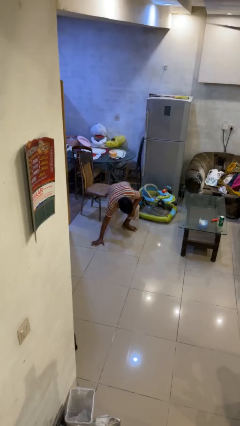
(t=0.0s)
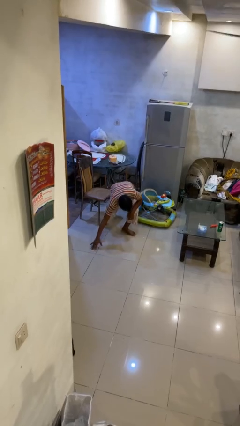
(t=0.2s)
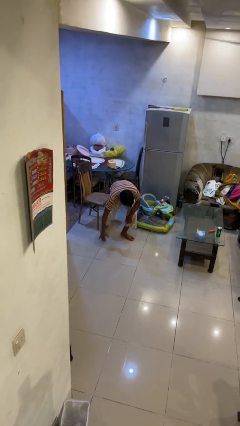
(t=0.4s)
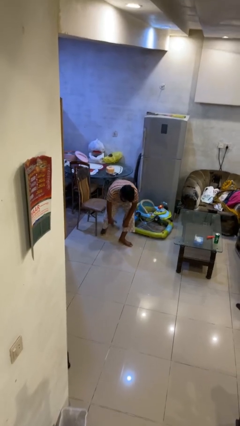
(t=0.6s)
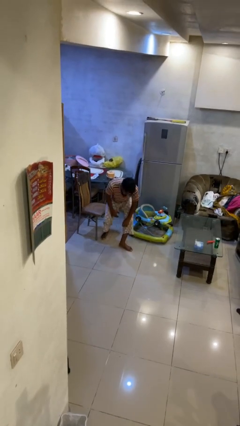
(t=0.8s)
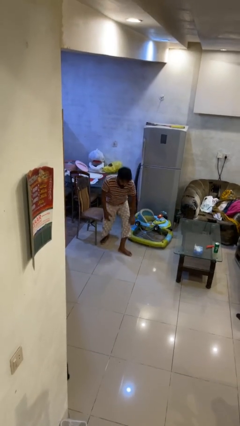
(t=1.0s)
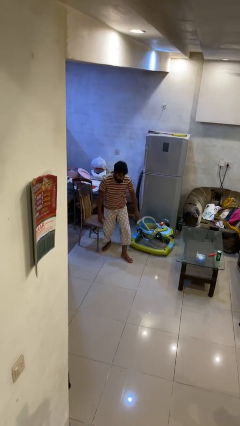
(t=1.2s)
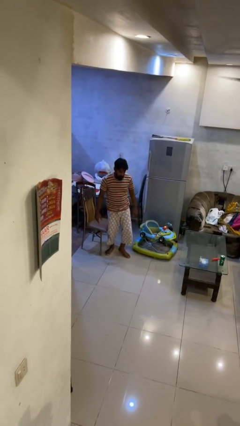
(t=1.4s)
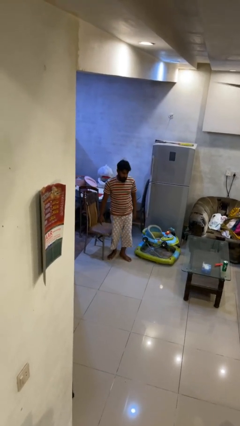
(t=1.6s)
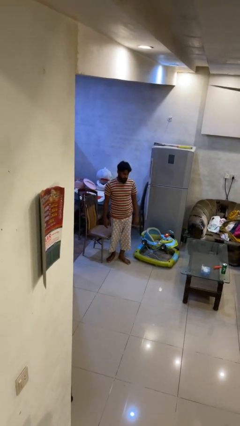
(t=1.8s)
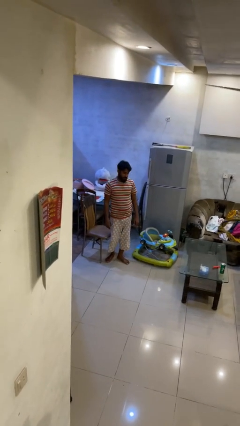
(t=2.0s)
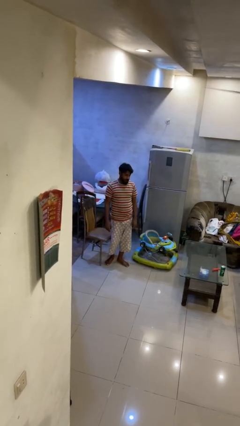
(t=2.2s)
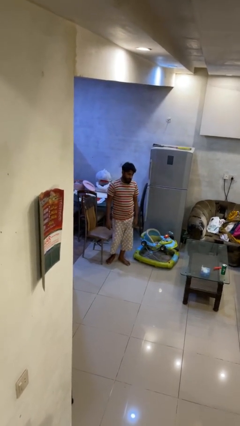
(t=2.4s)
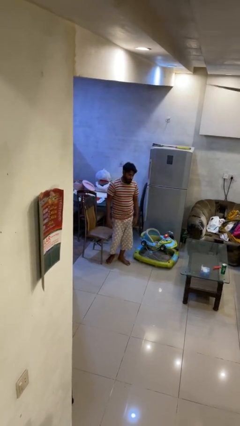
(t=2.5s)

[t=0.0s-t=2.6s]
person stands up from floor

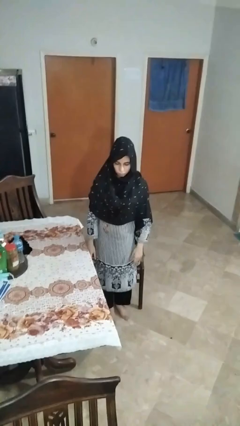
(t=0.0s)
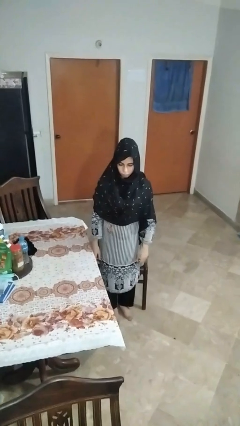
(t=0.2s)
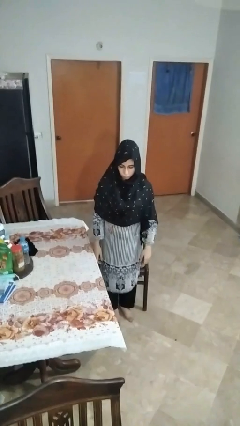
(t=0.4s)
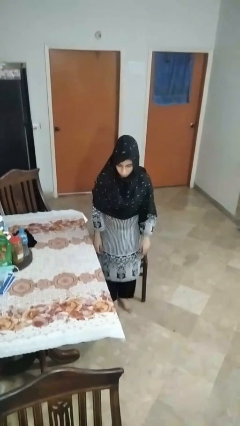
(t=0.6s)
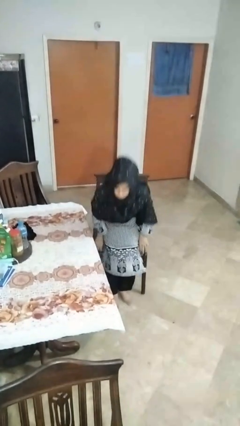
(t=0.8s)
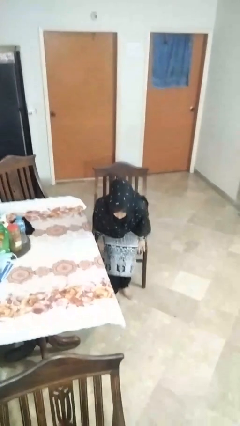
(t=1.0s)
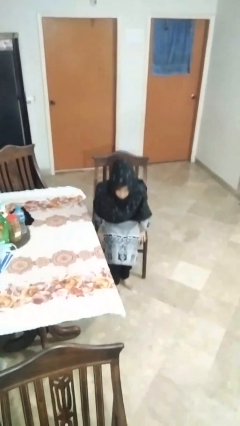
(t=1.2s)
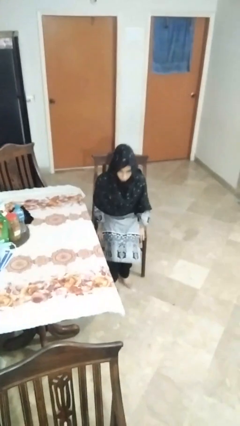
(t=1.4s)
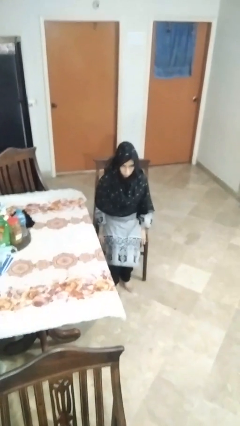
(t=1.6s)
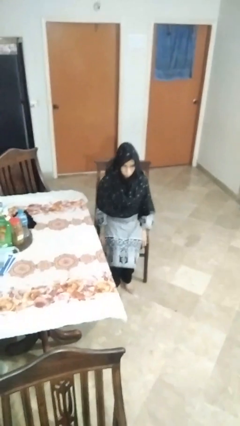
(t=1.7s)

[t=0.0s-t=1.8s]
person sits down

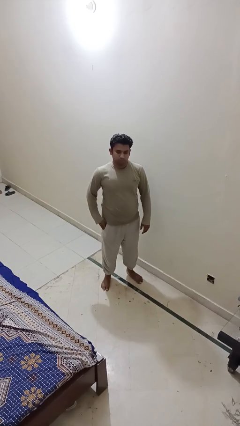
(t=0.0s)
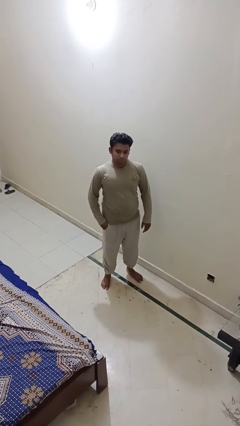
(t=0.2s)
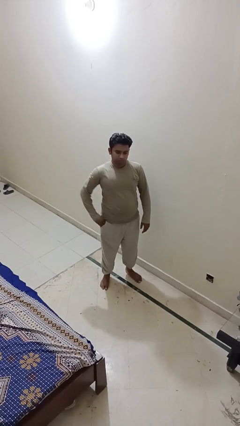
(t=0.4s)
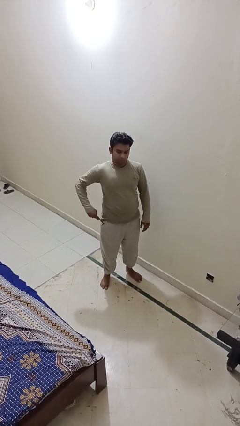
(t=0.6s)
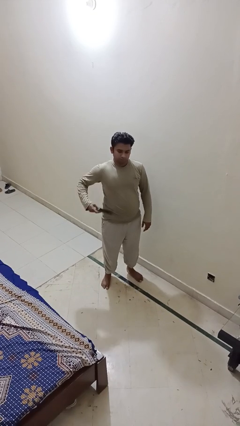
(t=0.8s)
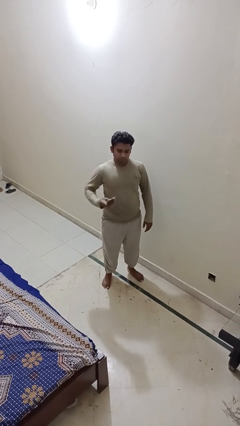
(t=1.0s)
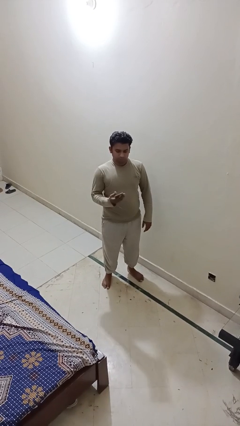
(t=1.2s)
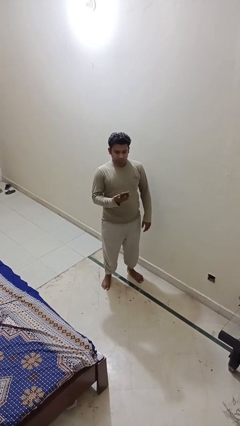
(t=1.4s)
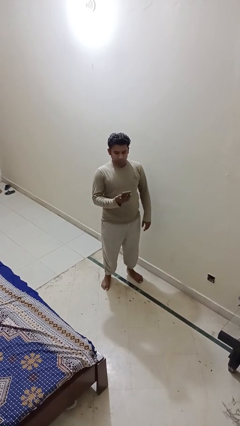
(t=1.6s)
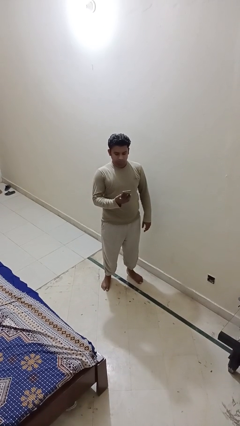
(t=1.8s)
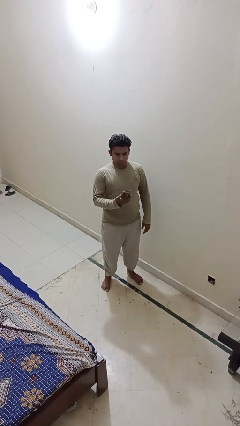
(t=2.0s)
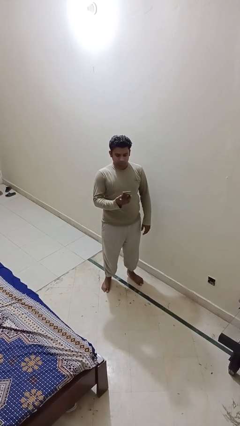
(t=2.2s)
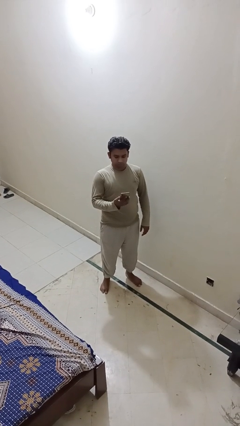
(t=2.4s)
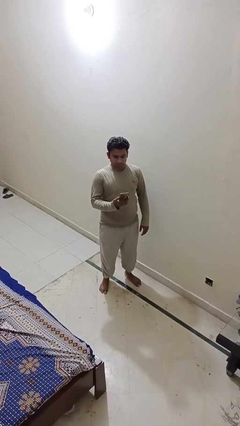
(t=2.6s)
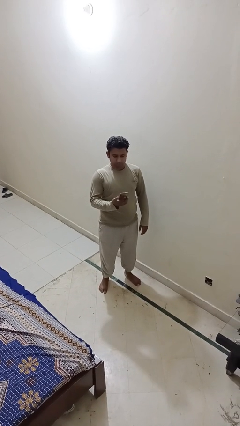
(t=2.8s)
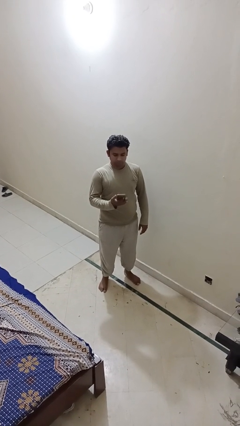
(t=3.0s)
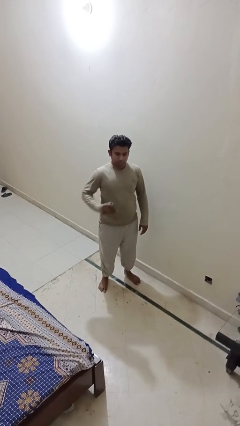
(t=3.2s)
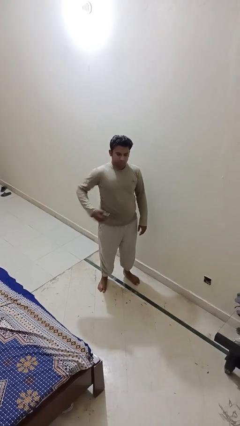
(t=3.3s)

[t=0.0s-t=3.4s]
person takes phone from pocket

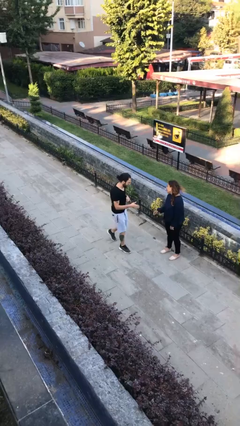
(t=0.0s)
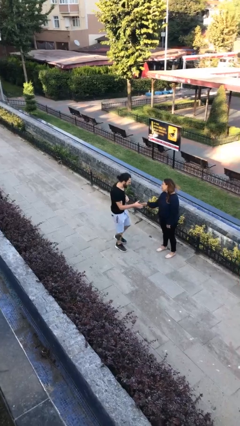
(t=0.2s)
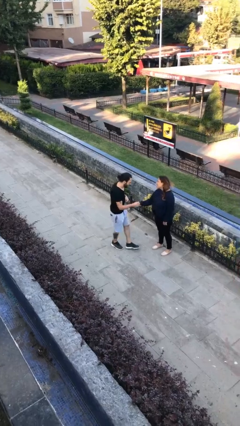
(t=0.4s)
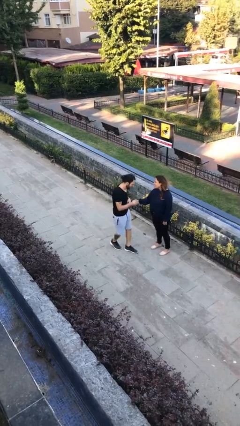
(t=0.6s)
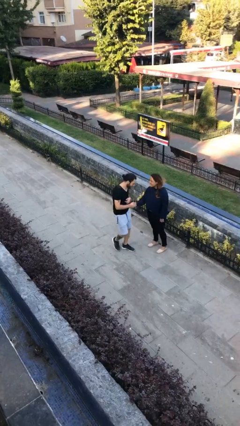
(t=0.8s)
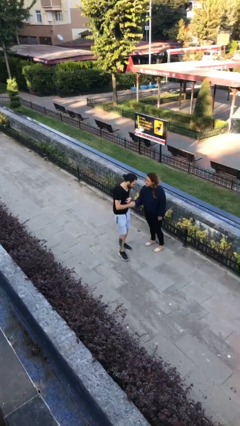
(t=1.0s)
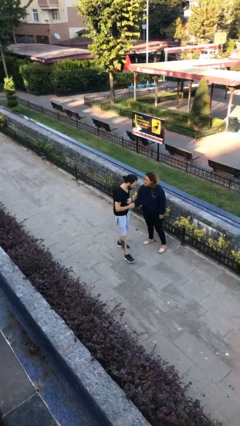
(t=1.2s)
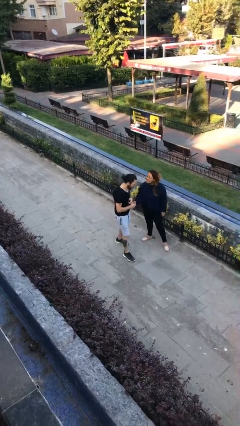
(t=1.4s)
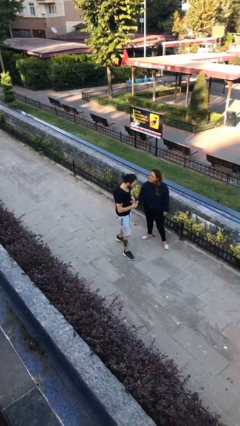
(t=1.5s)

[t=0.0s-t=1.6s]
person shakes hand

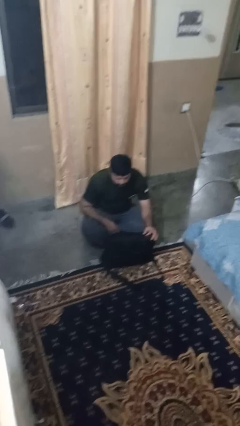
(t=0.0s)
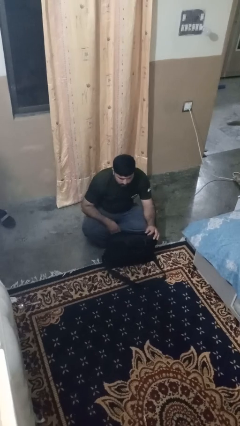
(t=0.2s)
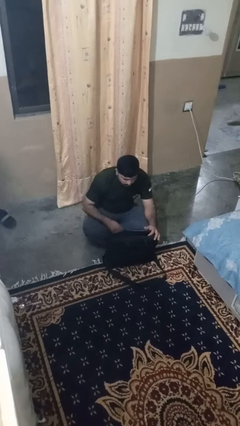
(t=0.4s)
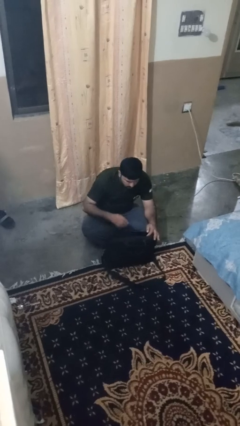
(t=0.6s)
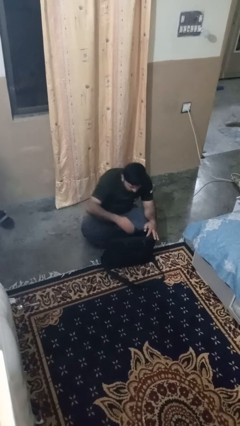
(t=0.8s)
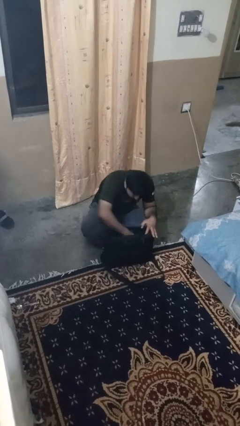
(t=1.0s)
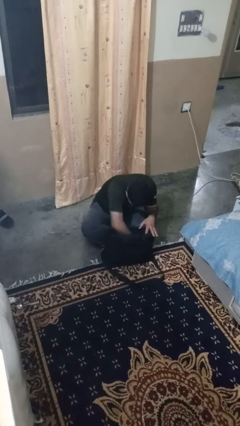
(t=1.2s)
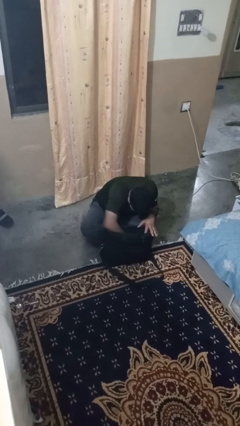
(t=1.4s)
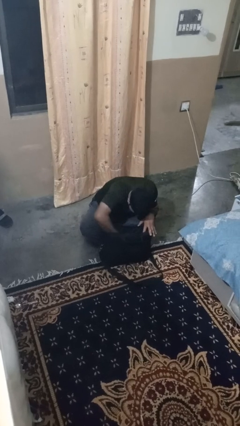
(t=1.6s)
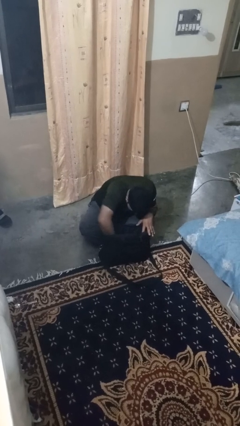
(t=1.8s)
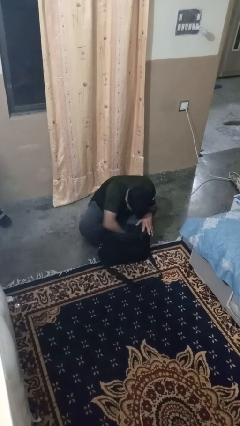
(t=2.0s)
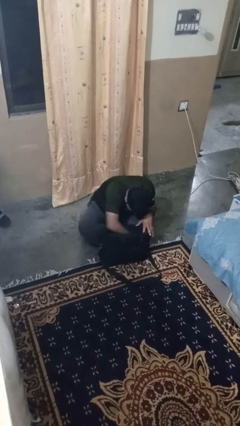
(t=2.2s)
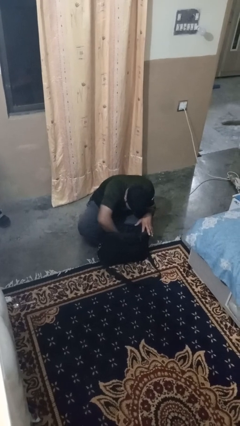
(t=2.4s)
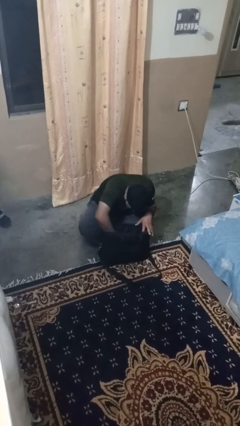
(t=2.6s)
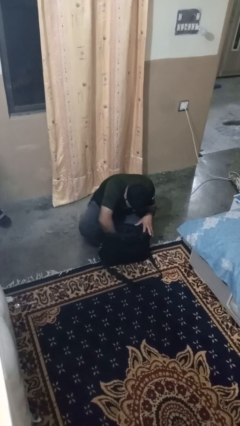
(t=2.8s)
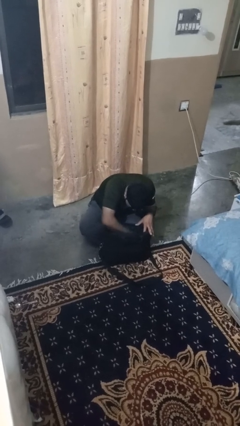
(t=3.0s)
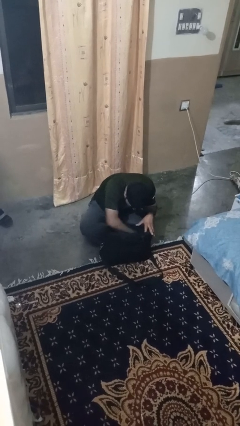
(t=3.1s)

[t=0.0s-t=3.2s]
person searches in bag

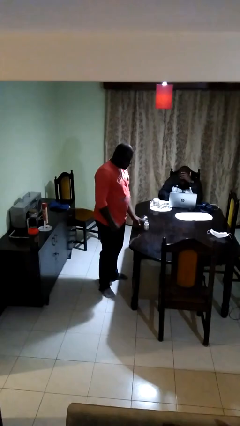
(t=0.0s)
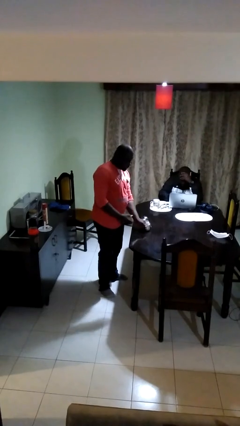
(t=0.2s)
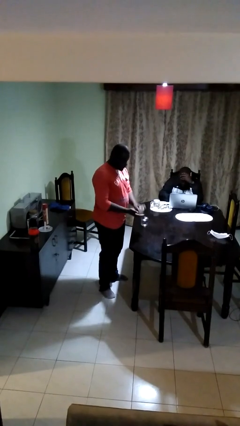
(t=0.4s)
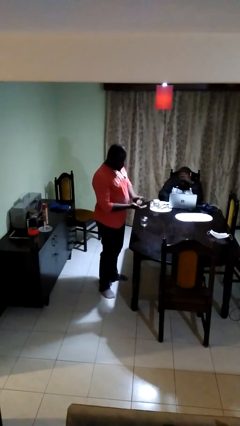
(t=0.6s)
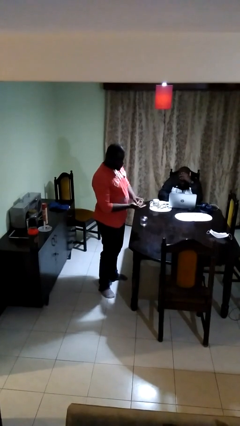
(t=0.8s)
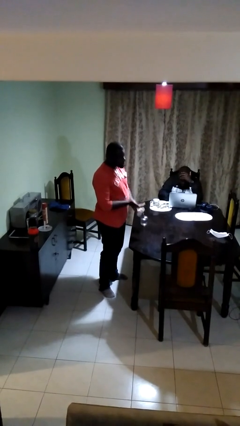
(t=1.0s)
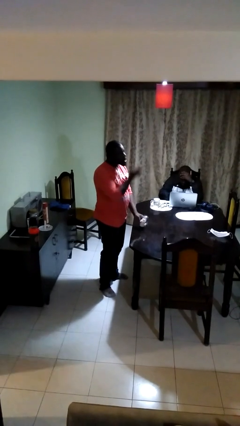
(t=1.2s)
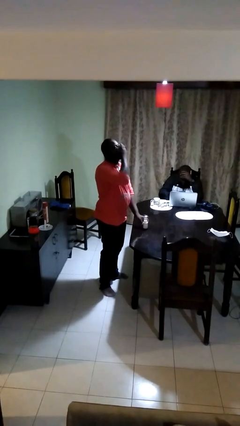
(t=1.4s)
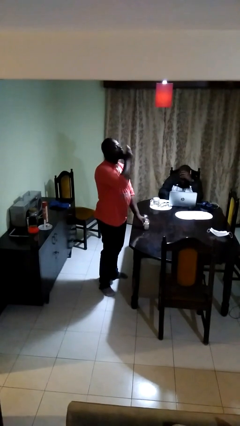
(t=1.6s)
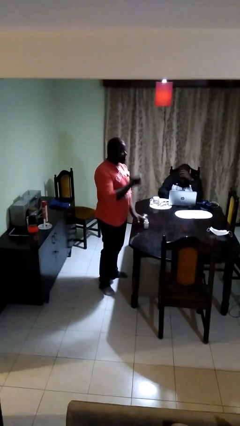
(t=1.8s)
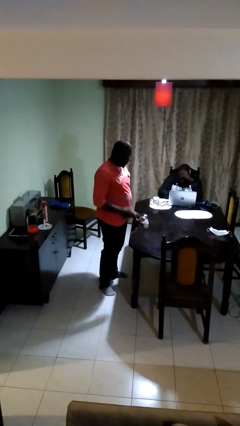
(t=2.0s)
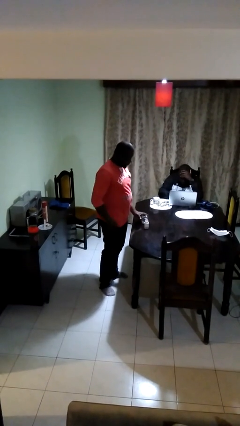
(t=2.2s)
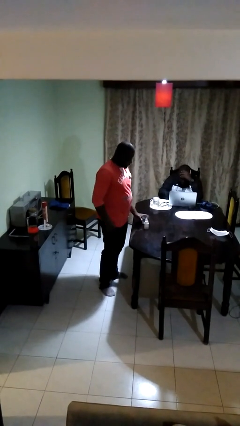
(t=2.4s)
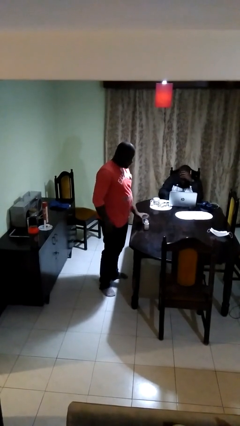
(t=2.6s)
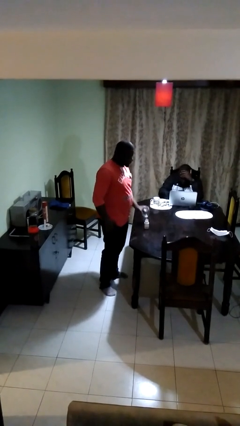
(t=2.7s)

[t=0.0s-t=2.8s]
person takes medicine pills

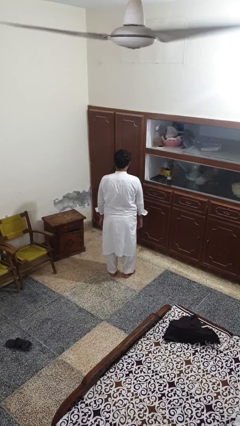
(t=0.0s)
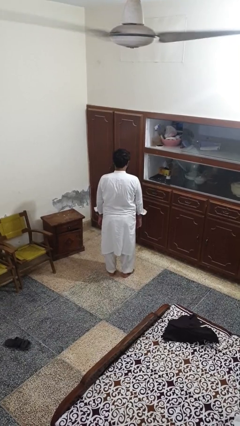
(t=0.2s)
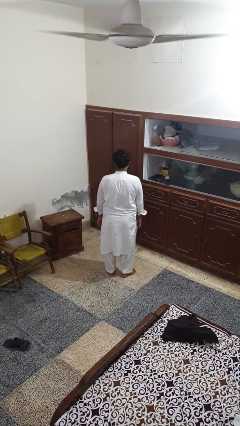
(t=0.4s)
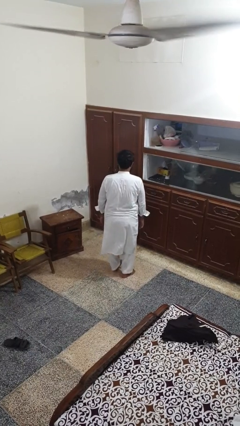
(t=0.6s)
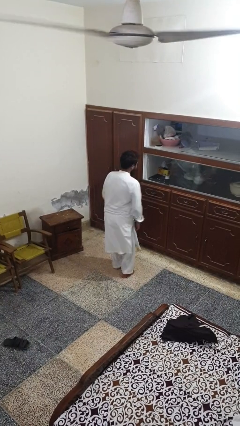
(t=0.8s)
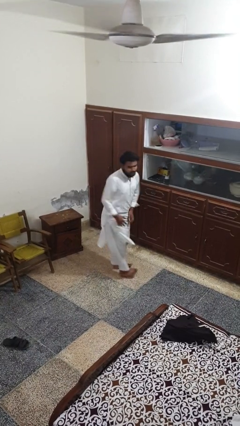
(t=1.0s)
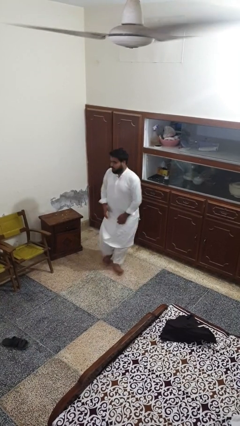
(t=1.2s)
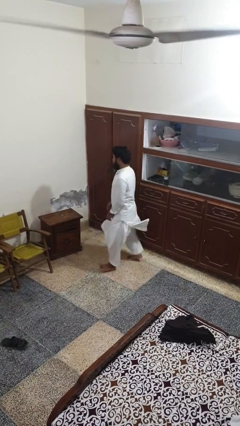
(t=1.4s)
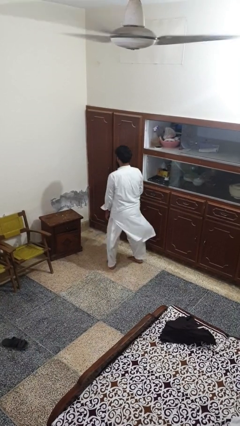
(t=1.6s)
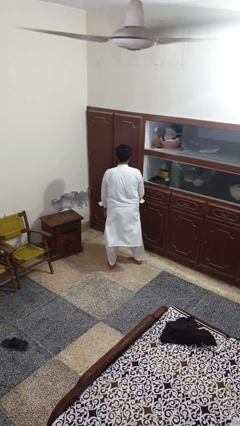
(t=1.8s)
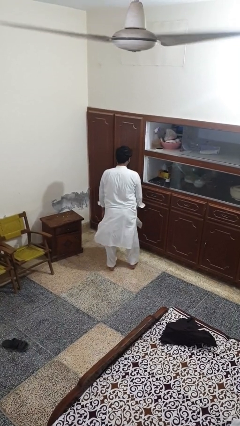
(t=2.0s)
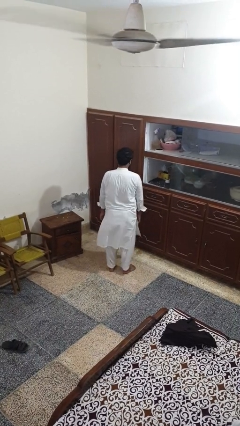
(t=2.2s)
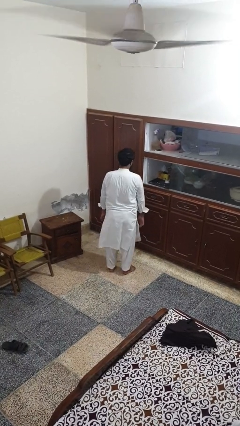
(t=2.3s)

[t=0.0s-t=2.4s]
person twirls
